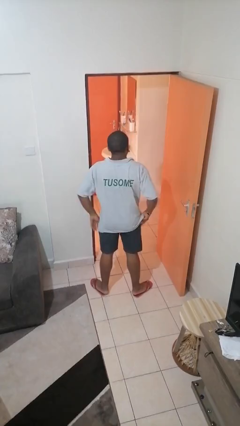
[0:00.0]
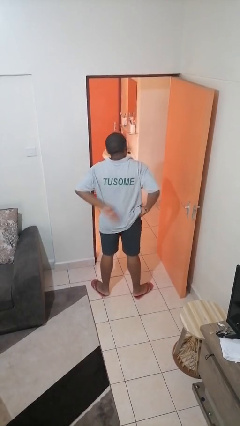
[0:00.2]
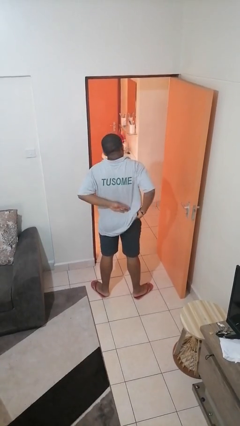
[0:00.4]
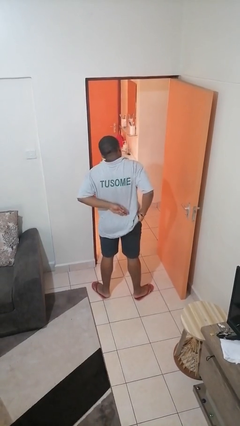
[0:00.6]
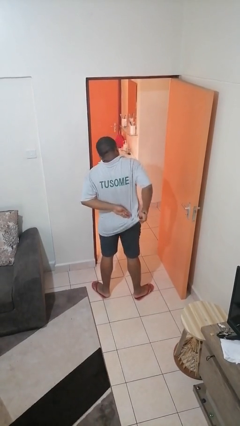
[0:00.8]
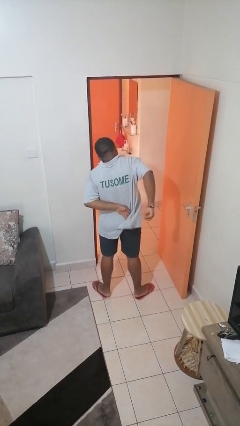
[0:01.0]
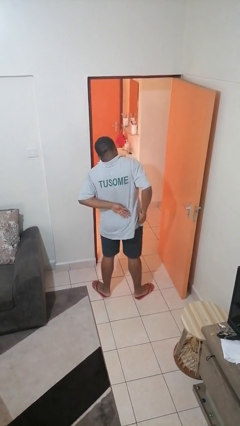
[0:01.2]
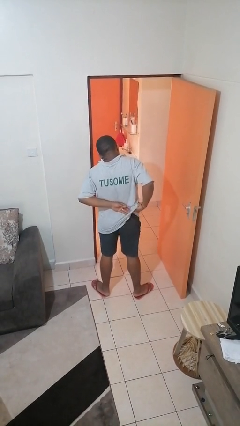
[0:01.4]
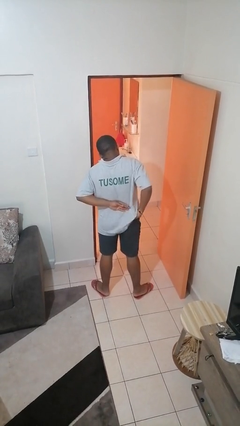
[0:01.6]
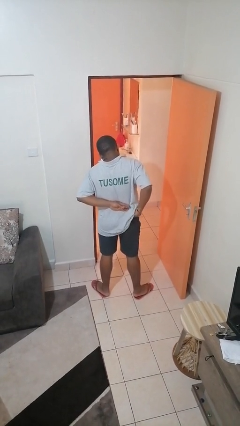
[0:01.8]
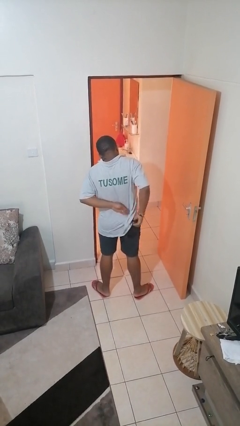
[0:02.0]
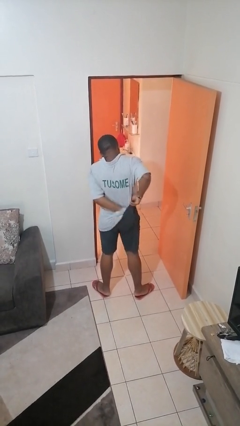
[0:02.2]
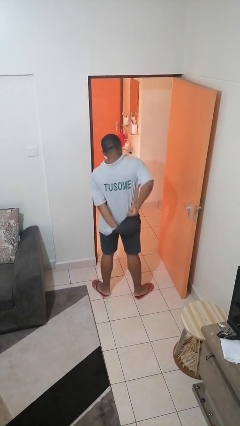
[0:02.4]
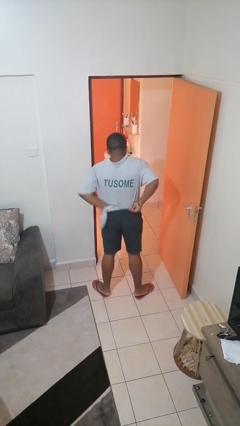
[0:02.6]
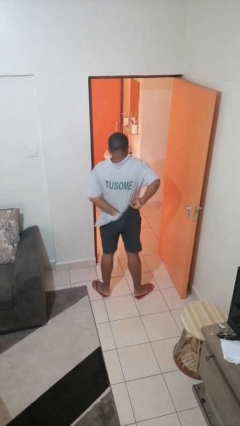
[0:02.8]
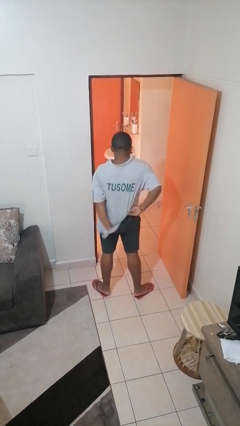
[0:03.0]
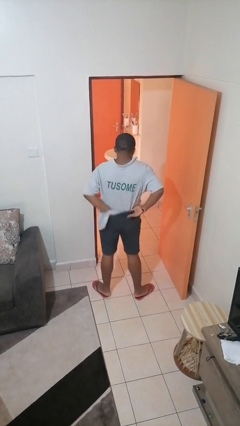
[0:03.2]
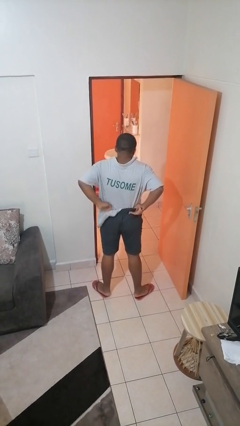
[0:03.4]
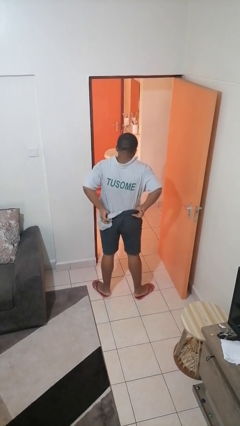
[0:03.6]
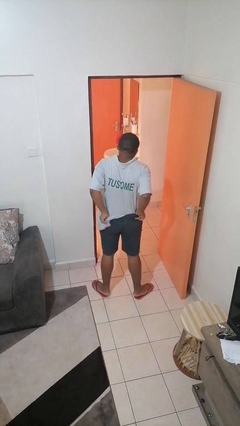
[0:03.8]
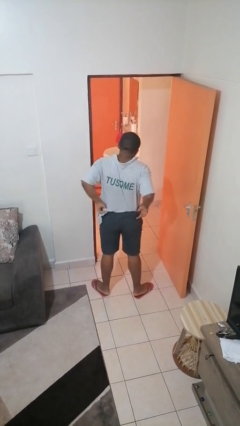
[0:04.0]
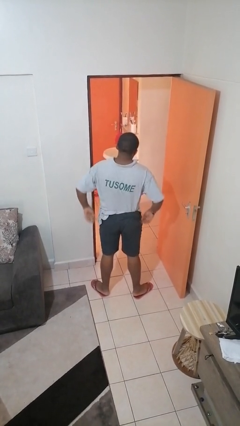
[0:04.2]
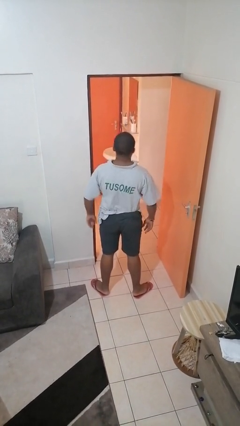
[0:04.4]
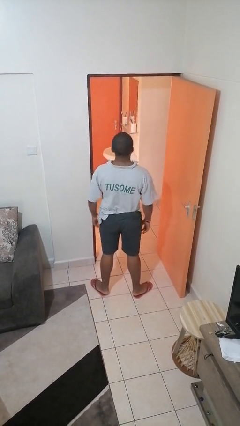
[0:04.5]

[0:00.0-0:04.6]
person tucks in shirt

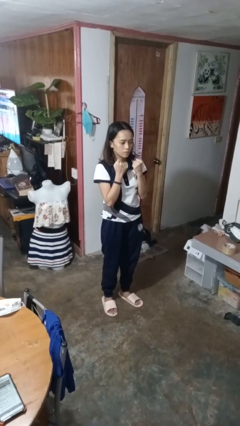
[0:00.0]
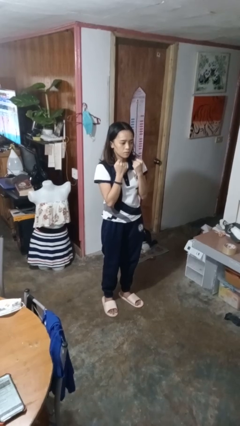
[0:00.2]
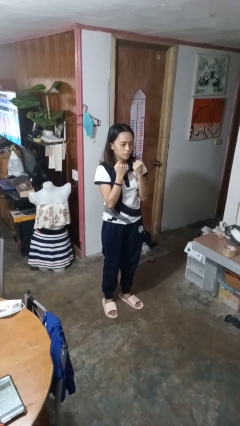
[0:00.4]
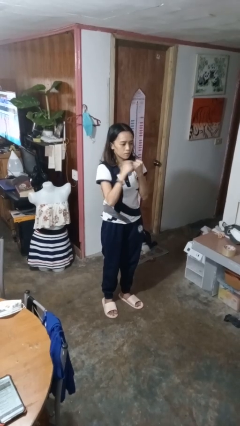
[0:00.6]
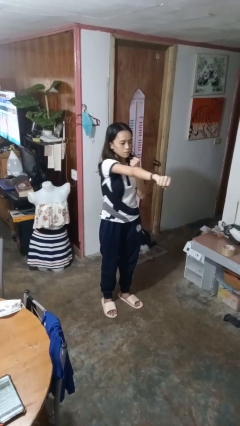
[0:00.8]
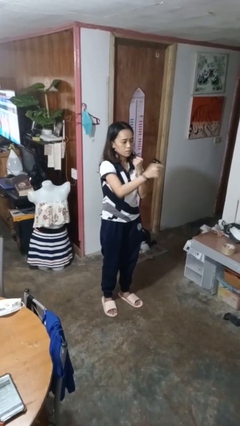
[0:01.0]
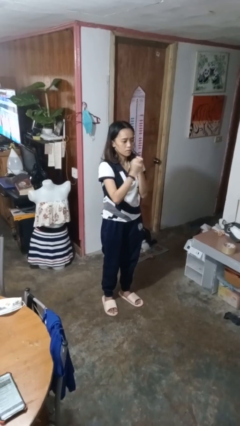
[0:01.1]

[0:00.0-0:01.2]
person punches

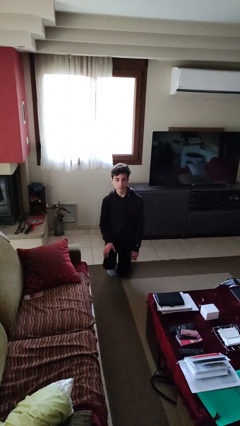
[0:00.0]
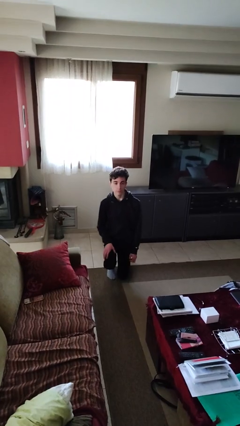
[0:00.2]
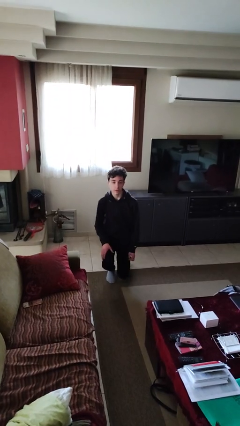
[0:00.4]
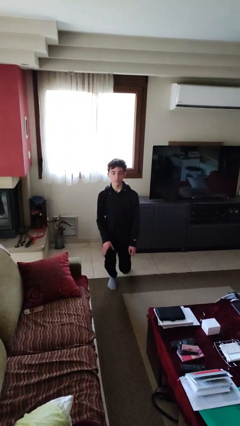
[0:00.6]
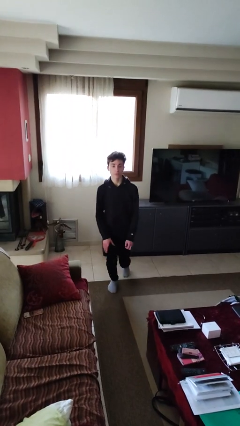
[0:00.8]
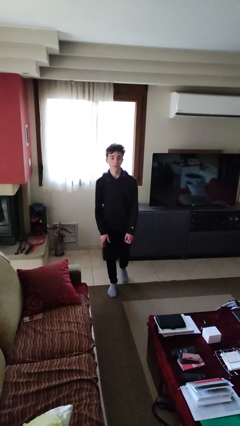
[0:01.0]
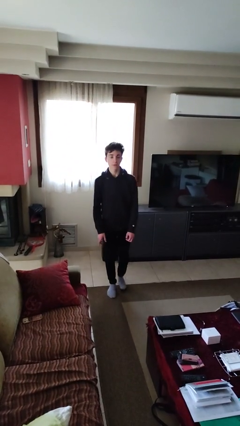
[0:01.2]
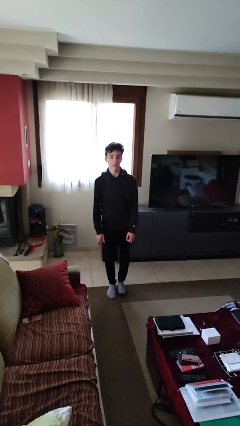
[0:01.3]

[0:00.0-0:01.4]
person stands up from floor

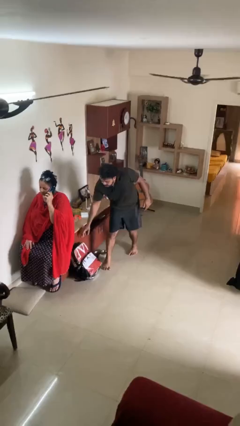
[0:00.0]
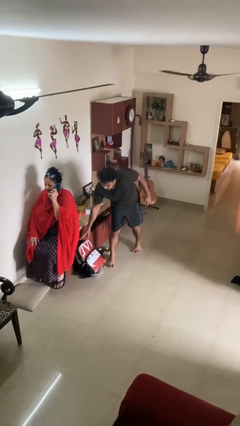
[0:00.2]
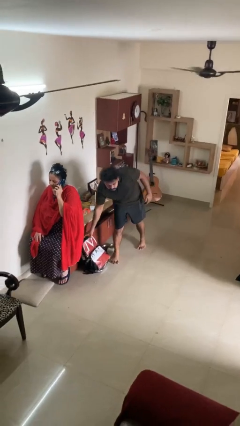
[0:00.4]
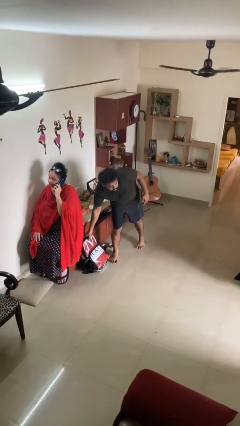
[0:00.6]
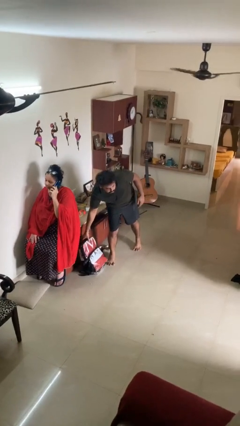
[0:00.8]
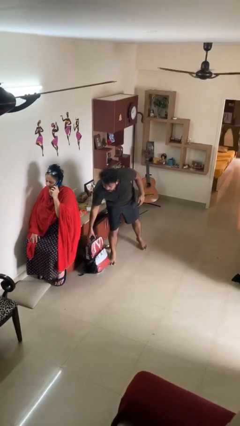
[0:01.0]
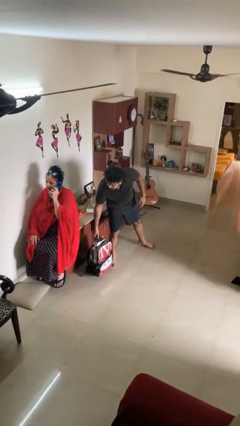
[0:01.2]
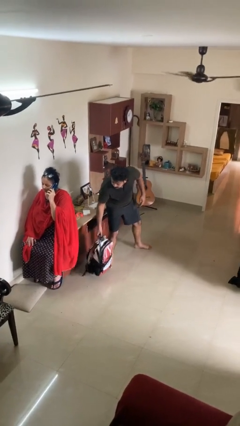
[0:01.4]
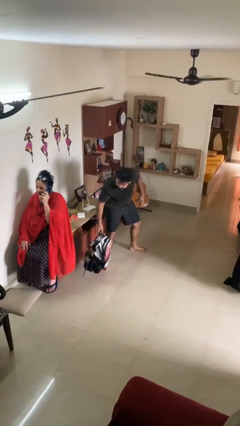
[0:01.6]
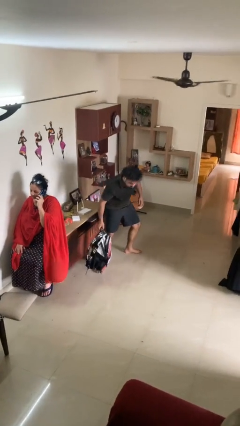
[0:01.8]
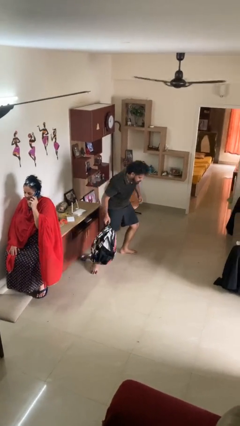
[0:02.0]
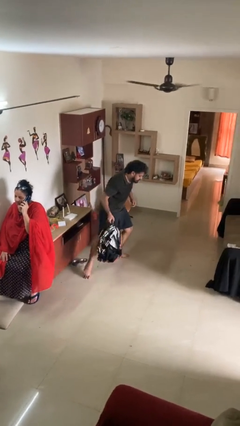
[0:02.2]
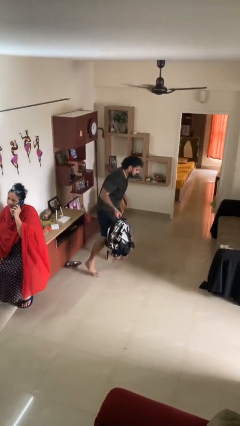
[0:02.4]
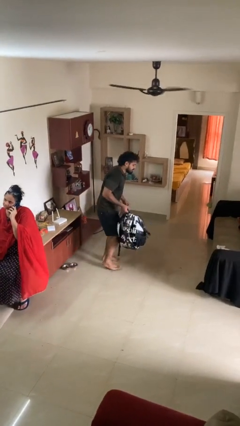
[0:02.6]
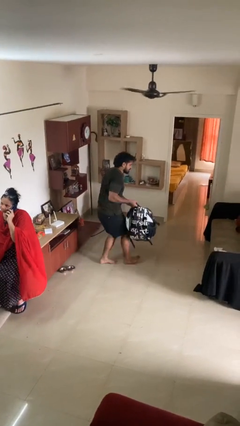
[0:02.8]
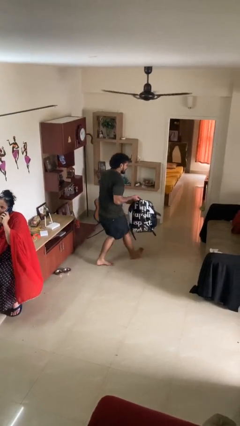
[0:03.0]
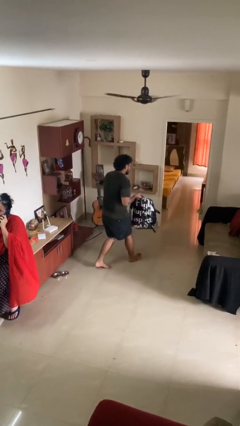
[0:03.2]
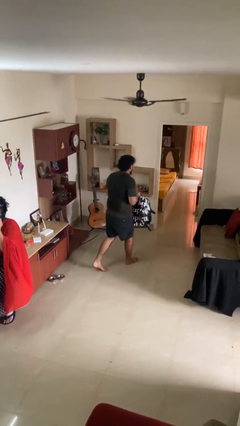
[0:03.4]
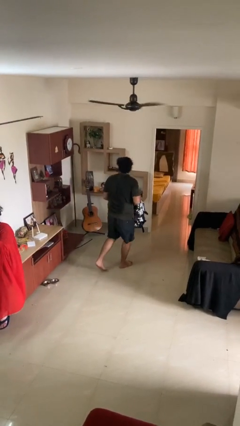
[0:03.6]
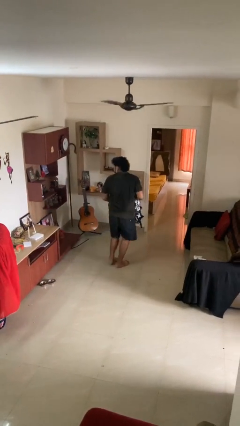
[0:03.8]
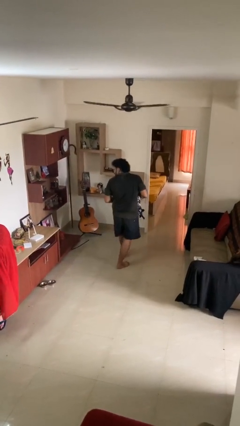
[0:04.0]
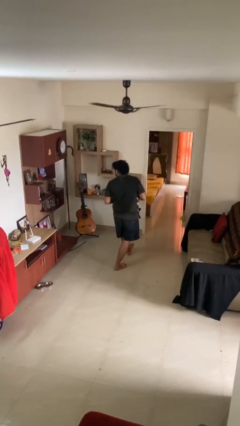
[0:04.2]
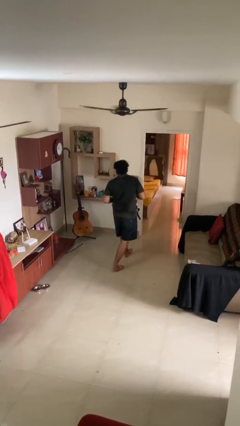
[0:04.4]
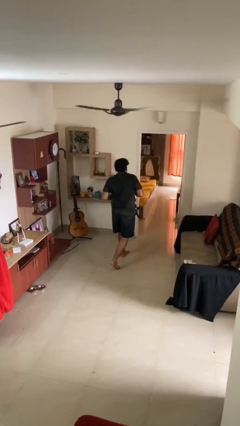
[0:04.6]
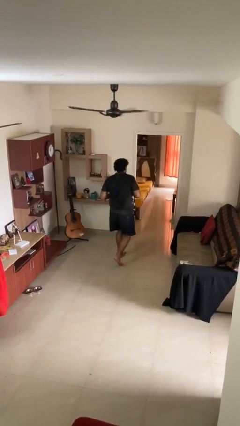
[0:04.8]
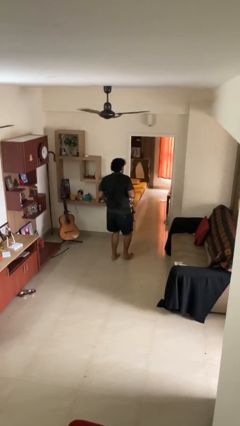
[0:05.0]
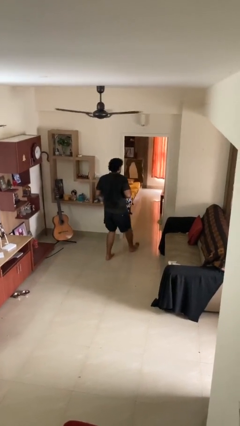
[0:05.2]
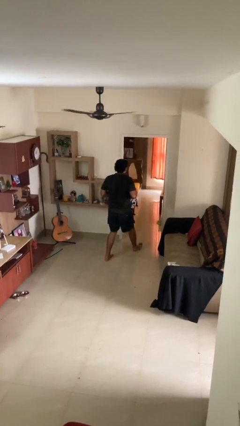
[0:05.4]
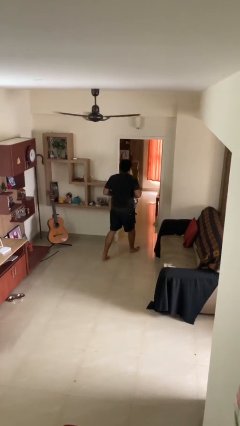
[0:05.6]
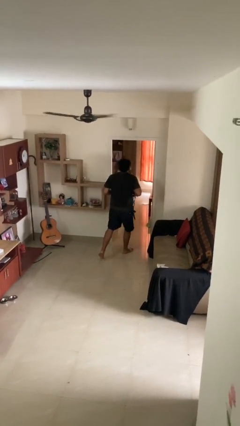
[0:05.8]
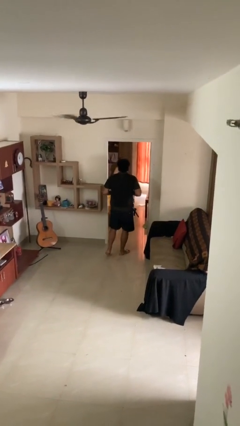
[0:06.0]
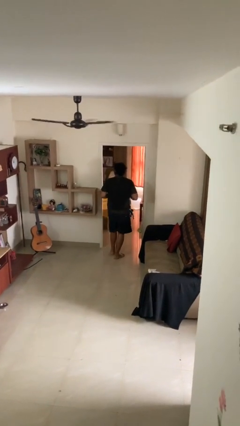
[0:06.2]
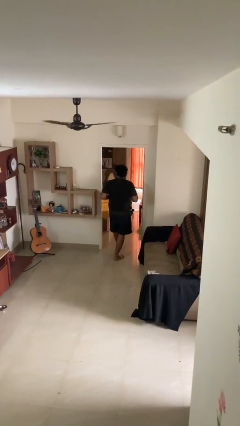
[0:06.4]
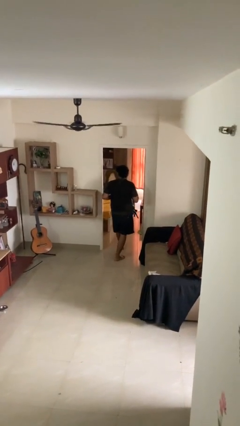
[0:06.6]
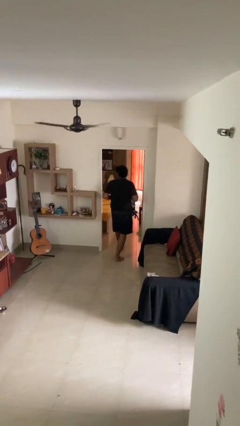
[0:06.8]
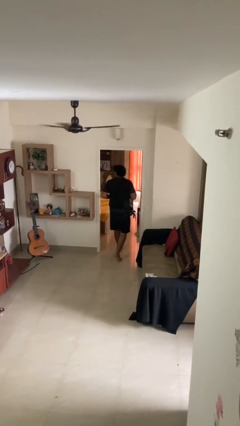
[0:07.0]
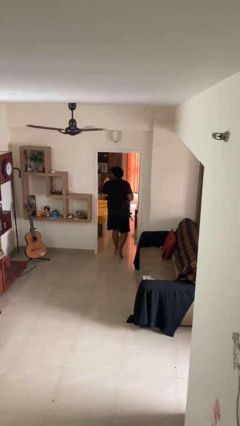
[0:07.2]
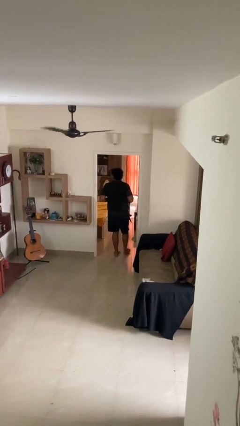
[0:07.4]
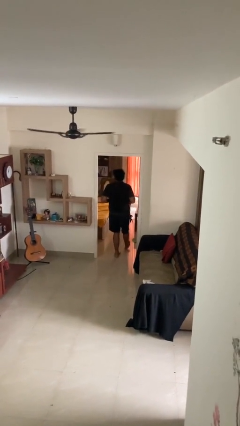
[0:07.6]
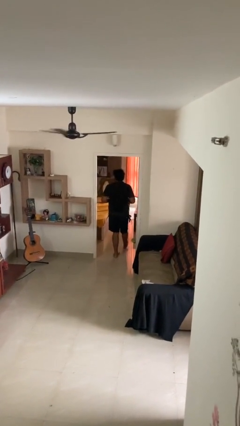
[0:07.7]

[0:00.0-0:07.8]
person steals object from person

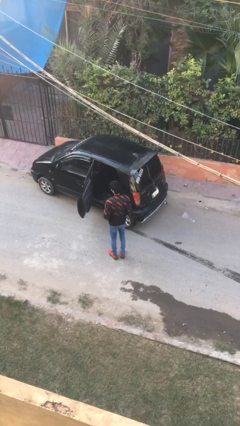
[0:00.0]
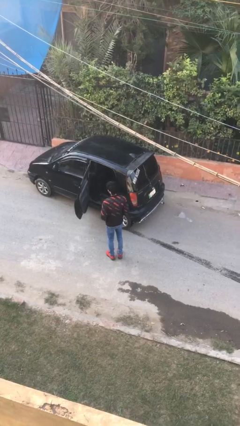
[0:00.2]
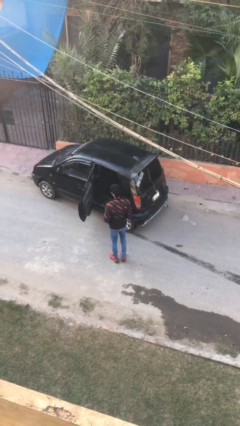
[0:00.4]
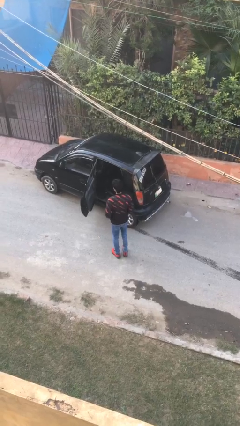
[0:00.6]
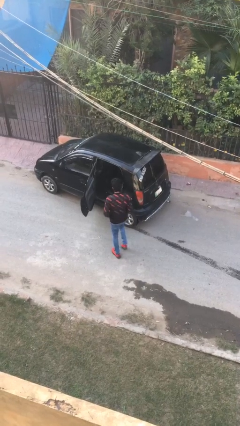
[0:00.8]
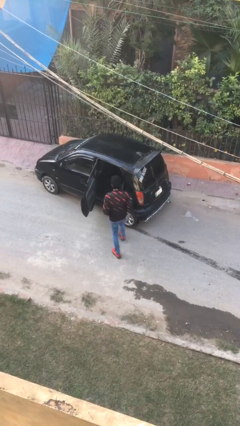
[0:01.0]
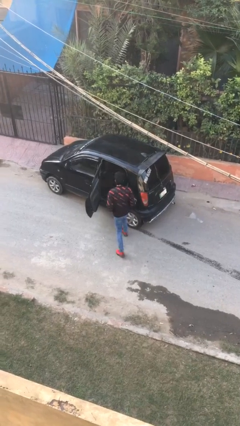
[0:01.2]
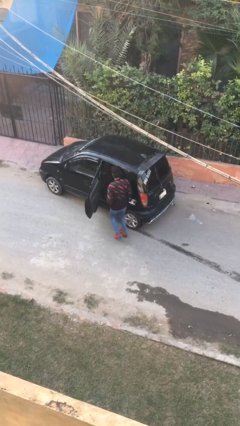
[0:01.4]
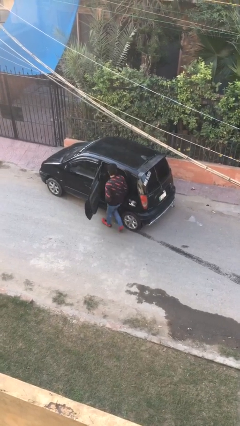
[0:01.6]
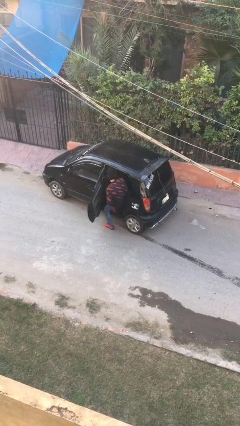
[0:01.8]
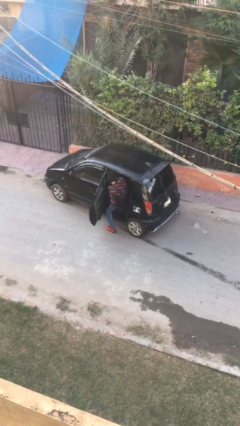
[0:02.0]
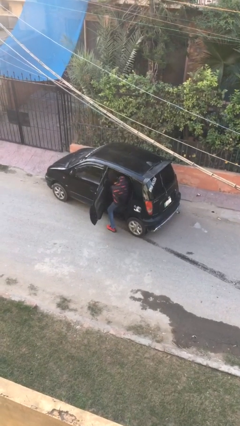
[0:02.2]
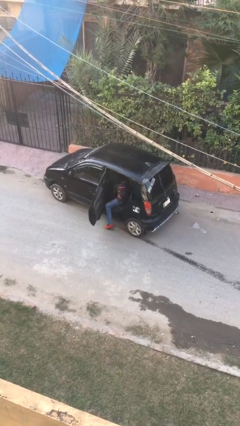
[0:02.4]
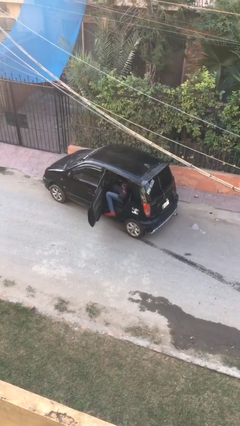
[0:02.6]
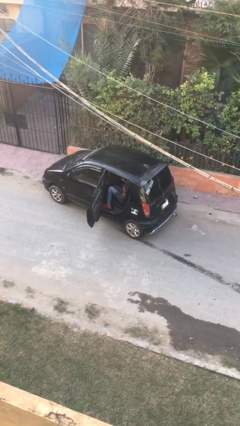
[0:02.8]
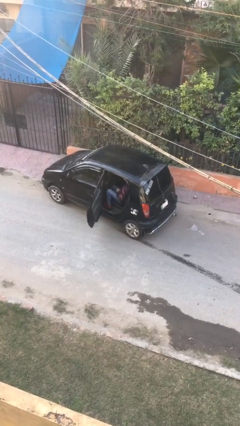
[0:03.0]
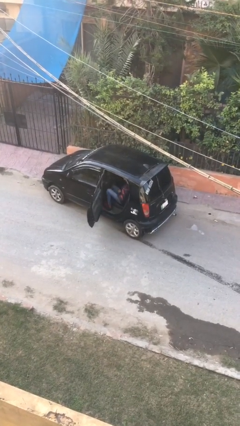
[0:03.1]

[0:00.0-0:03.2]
person enters car
